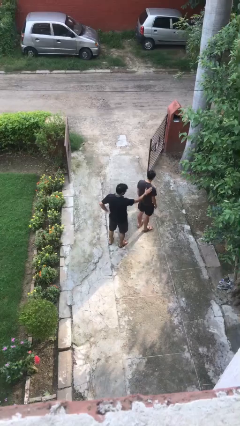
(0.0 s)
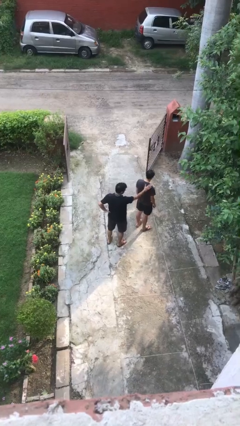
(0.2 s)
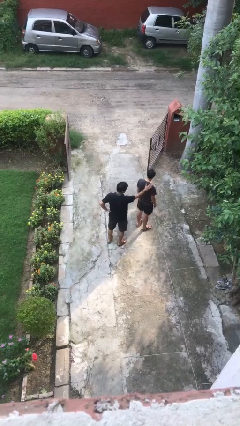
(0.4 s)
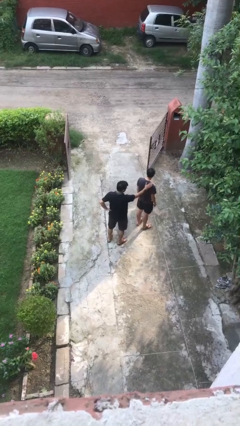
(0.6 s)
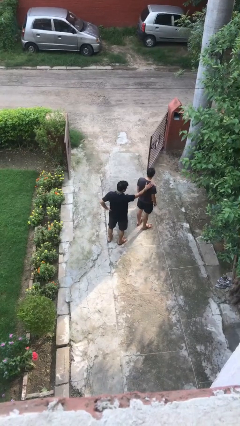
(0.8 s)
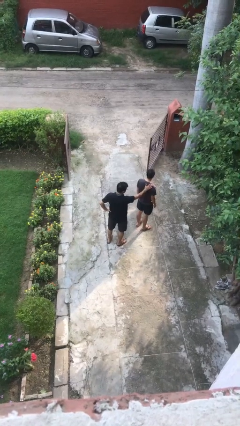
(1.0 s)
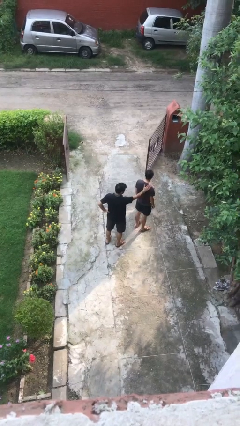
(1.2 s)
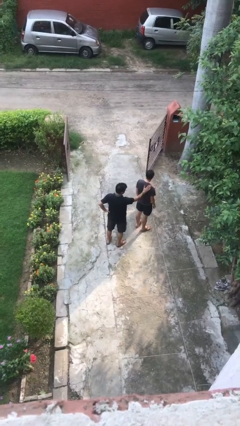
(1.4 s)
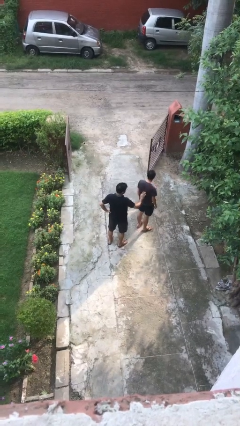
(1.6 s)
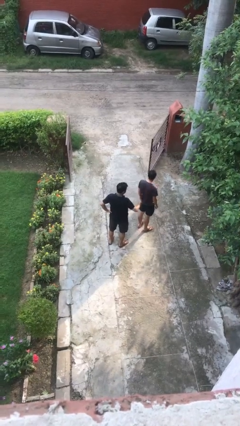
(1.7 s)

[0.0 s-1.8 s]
person touches back of person

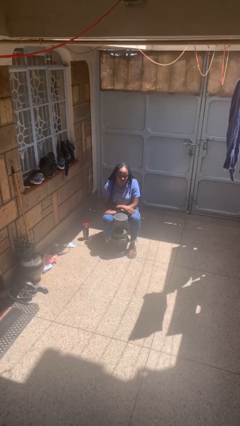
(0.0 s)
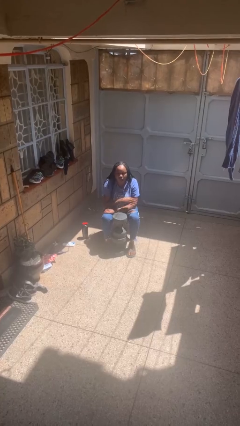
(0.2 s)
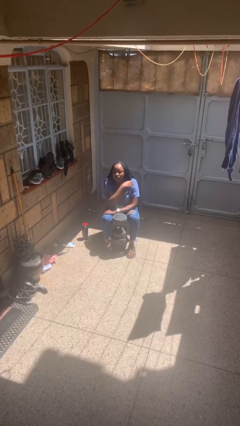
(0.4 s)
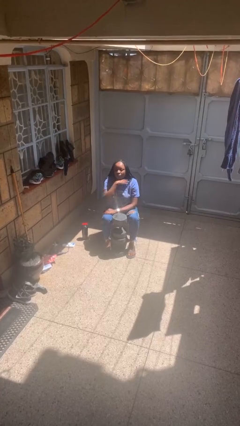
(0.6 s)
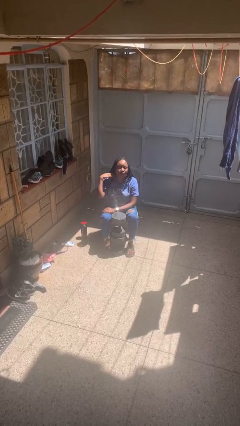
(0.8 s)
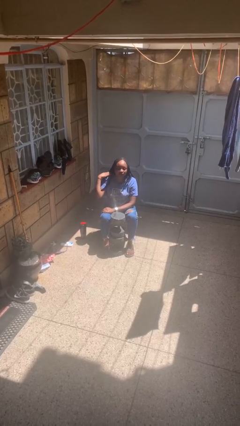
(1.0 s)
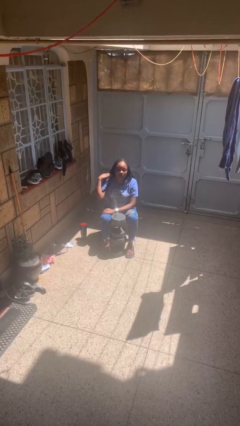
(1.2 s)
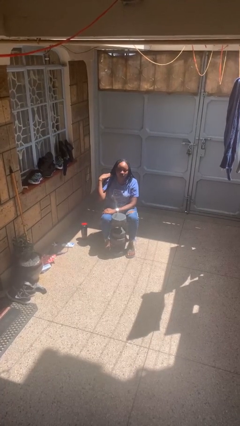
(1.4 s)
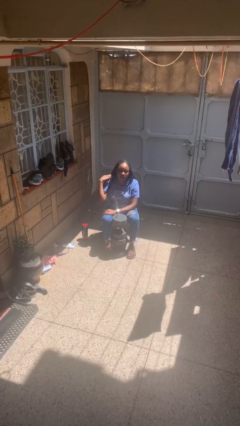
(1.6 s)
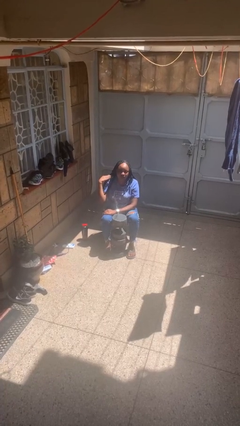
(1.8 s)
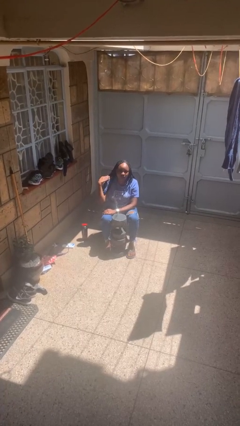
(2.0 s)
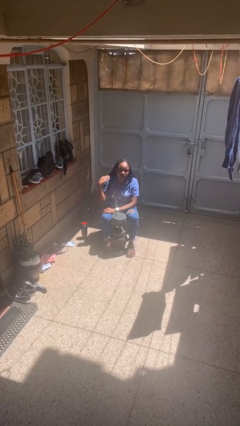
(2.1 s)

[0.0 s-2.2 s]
person gestures cut

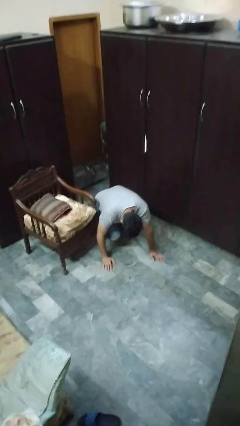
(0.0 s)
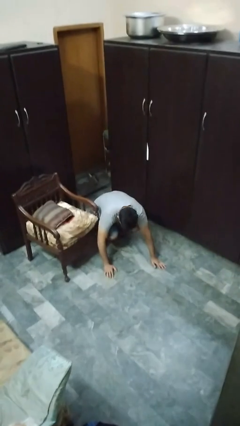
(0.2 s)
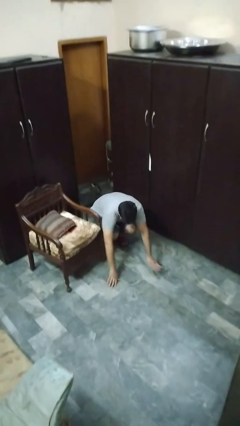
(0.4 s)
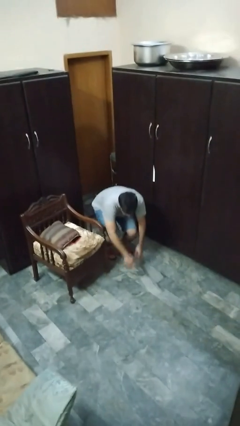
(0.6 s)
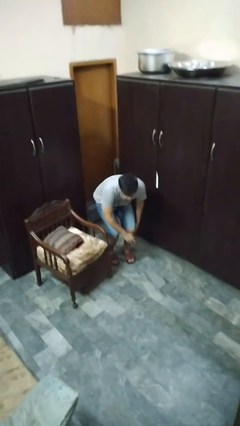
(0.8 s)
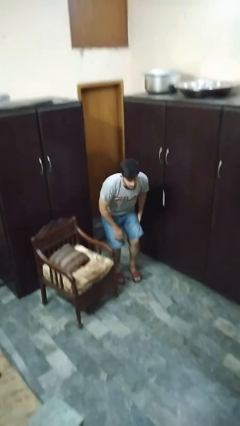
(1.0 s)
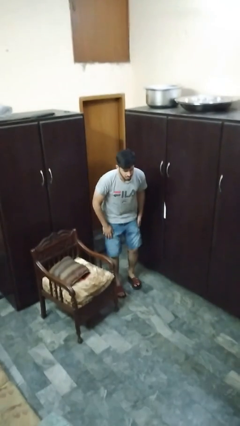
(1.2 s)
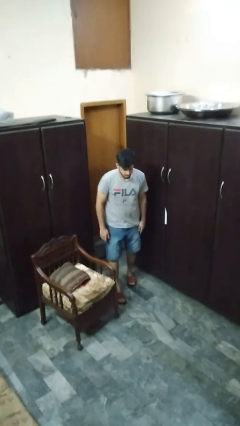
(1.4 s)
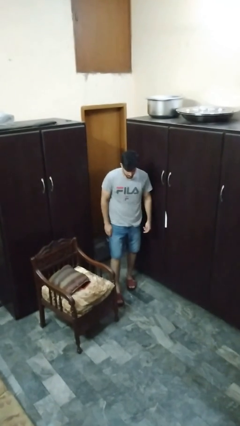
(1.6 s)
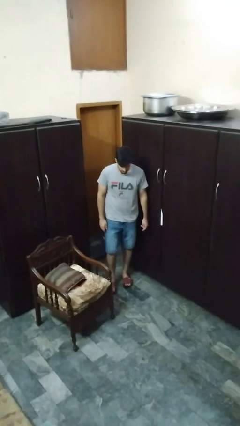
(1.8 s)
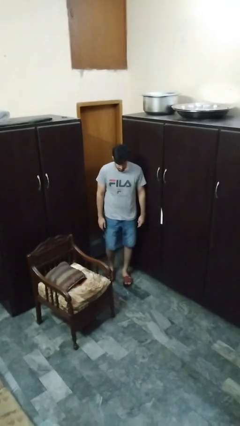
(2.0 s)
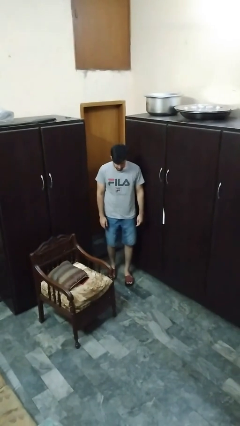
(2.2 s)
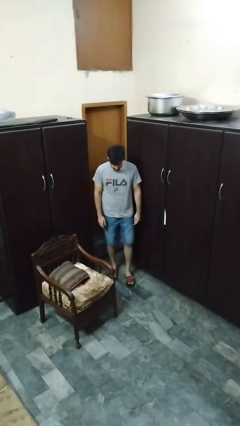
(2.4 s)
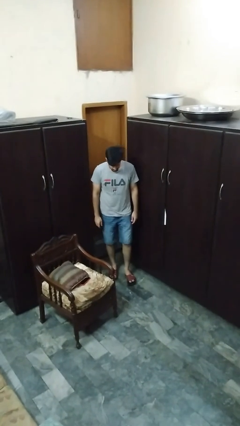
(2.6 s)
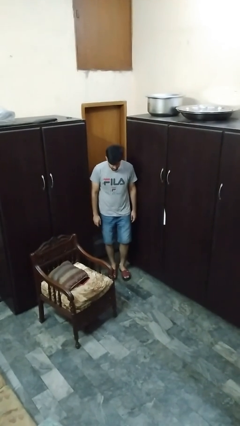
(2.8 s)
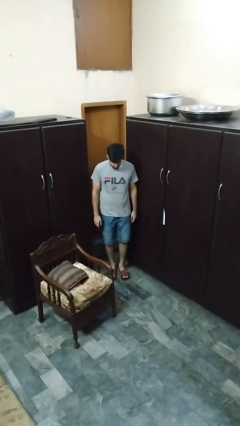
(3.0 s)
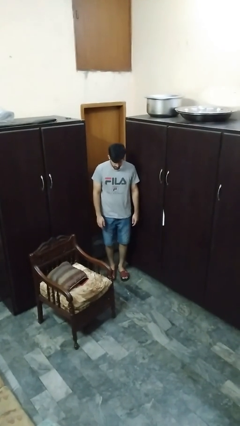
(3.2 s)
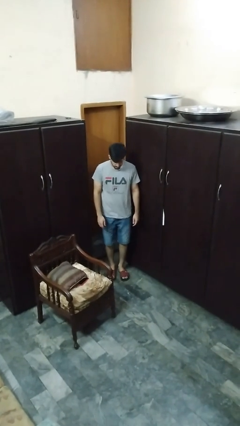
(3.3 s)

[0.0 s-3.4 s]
person stands up from floor

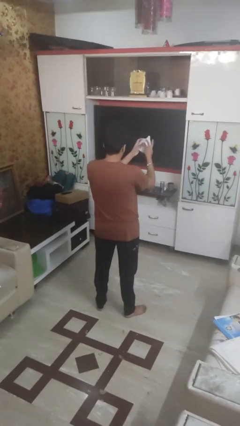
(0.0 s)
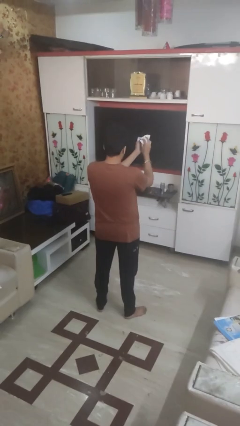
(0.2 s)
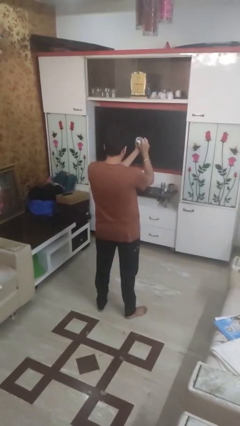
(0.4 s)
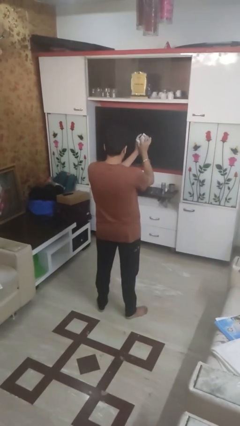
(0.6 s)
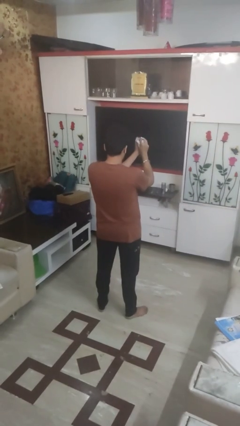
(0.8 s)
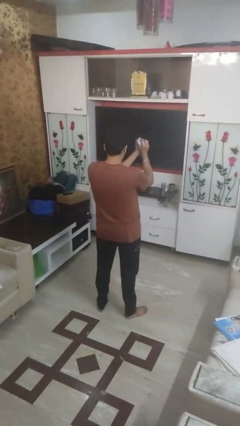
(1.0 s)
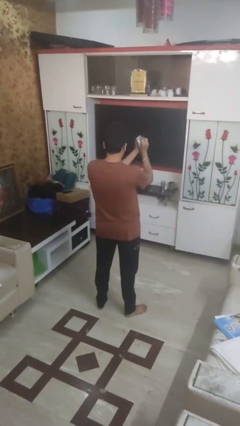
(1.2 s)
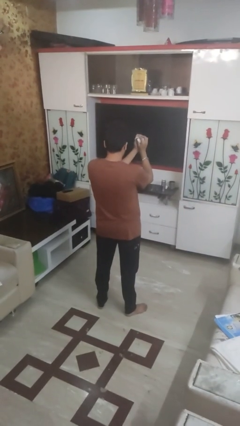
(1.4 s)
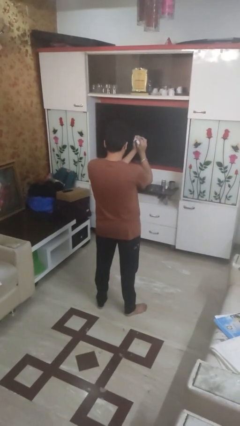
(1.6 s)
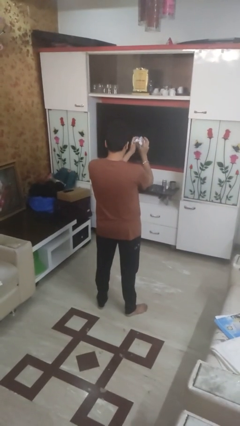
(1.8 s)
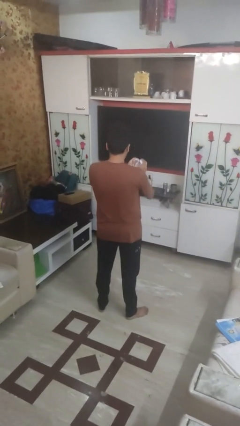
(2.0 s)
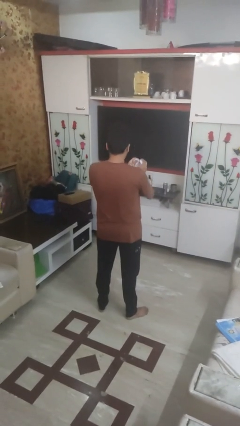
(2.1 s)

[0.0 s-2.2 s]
person crumples paper

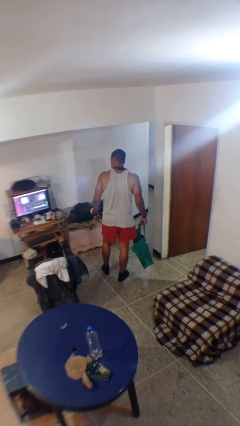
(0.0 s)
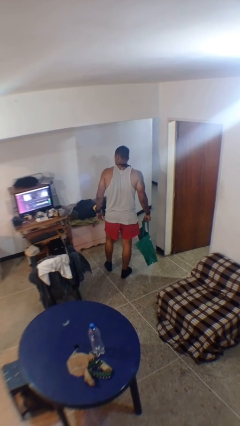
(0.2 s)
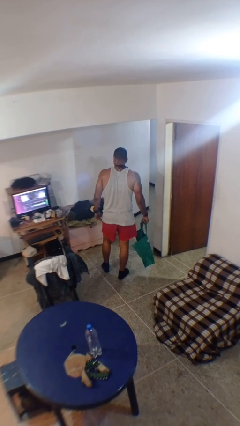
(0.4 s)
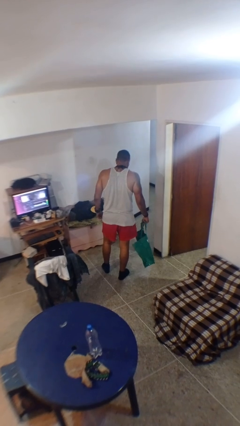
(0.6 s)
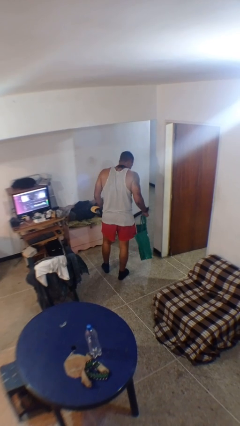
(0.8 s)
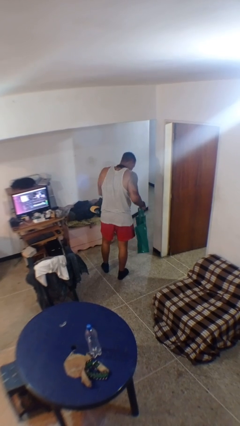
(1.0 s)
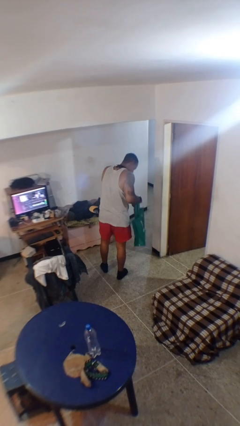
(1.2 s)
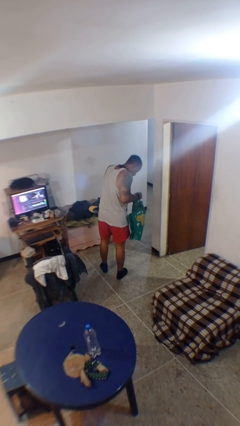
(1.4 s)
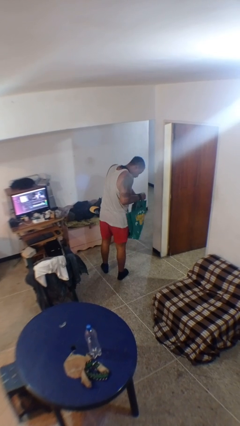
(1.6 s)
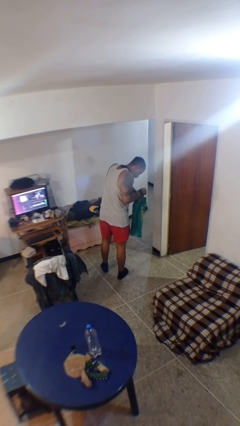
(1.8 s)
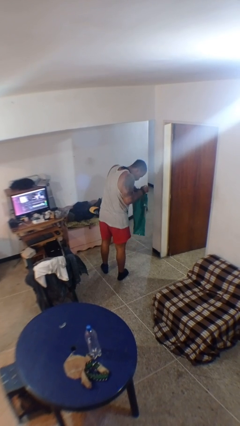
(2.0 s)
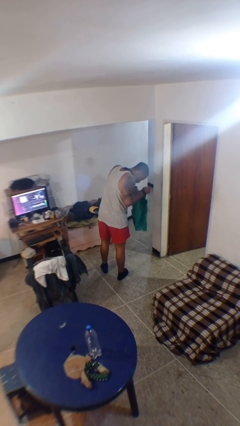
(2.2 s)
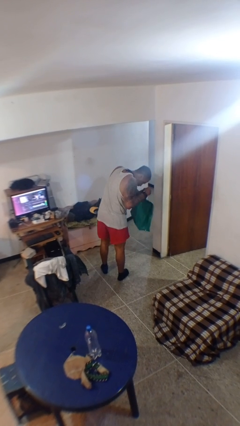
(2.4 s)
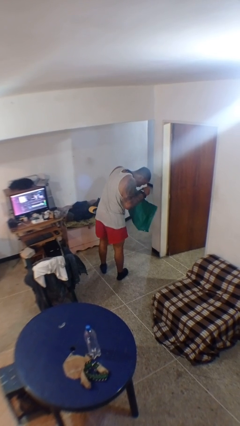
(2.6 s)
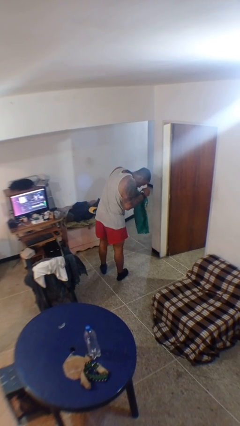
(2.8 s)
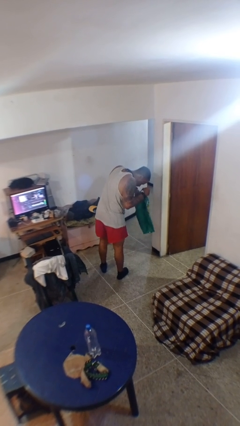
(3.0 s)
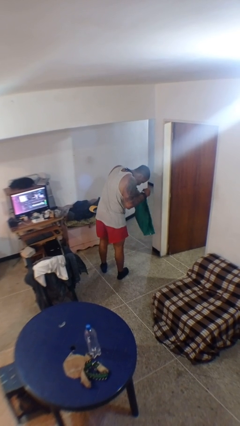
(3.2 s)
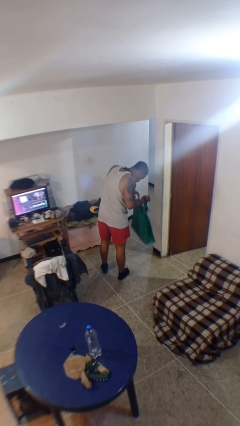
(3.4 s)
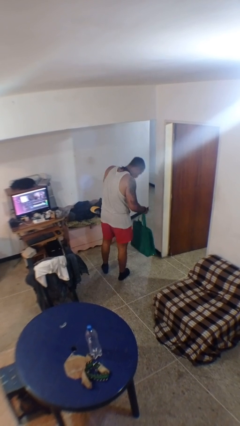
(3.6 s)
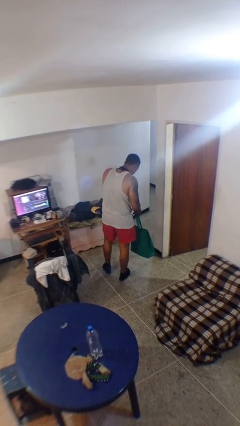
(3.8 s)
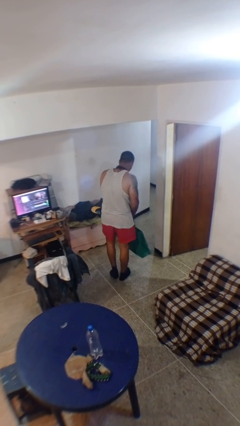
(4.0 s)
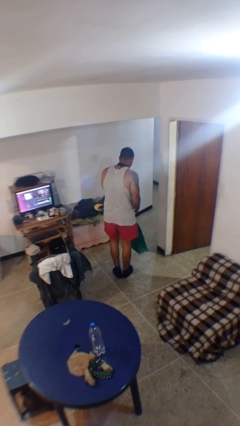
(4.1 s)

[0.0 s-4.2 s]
person searches in bag

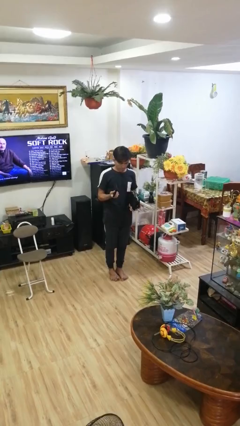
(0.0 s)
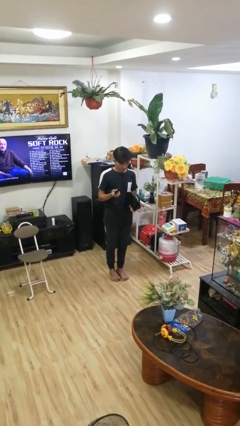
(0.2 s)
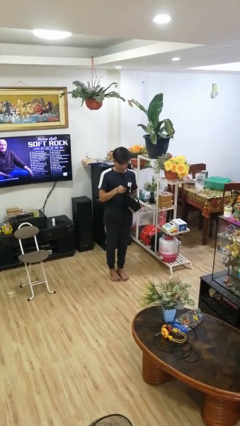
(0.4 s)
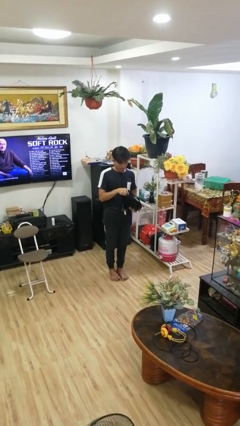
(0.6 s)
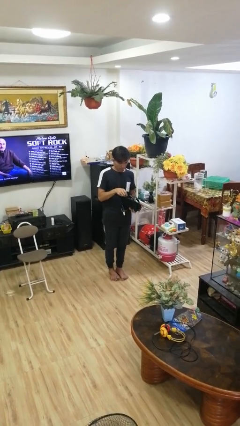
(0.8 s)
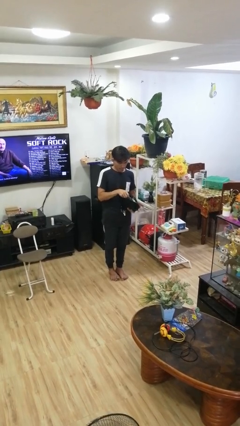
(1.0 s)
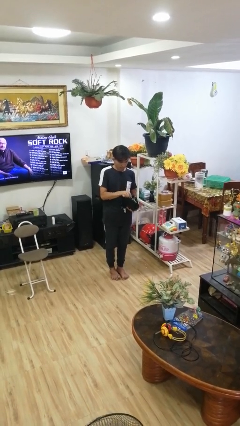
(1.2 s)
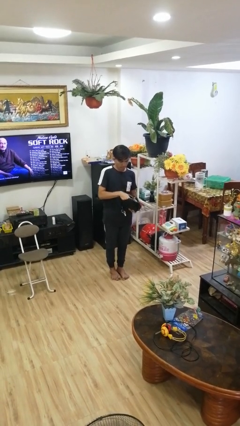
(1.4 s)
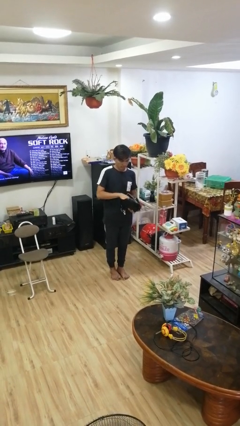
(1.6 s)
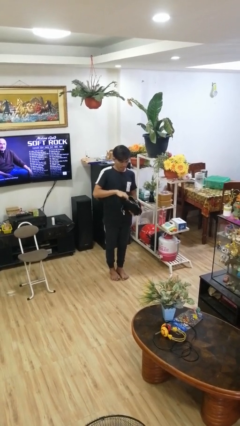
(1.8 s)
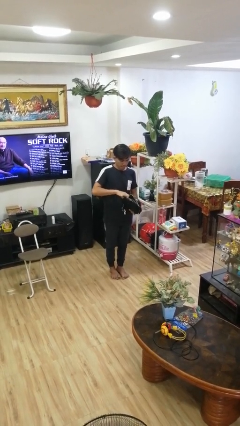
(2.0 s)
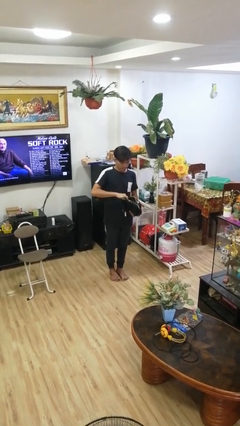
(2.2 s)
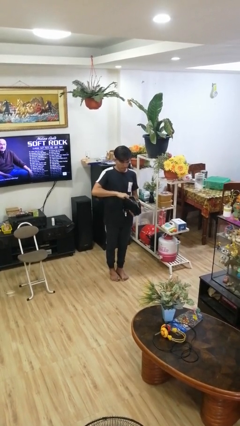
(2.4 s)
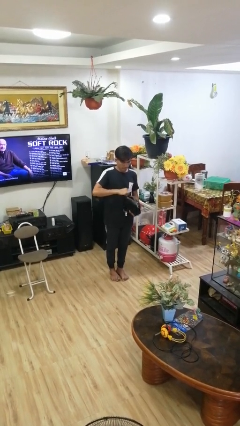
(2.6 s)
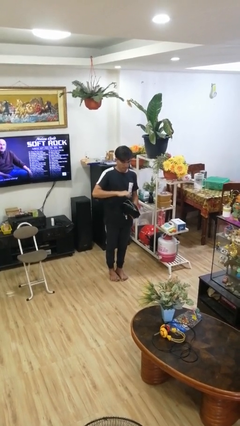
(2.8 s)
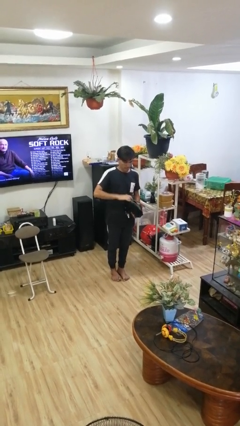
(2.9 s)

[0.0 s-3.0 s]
person puts object into purse
